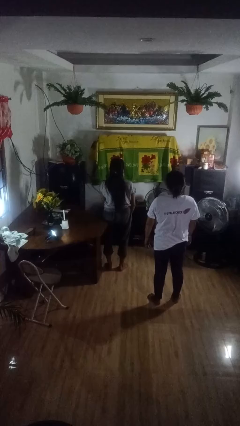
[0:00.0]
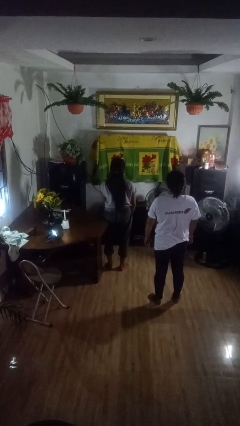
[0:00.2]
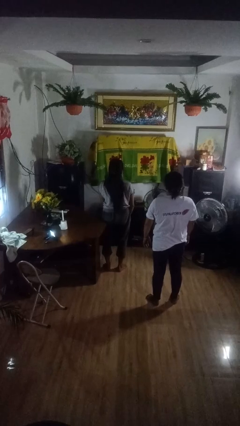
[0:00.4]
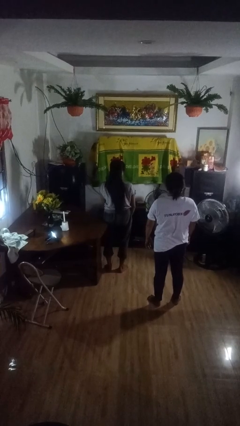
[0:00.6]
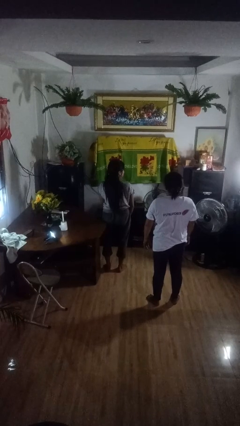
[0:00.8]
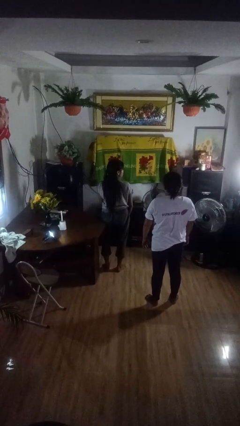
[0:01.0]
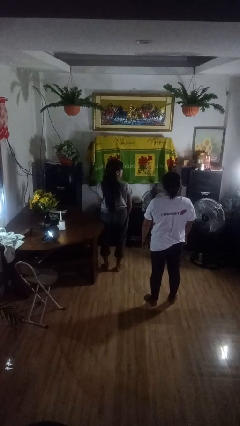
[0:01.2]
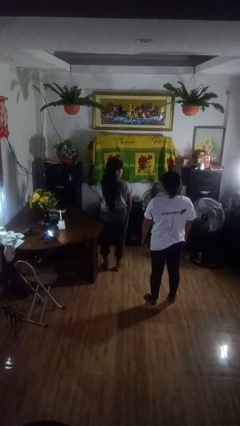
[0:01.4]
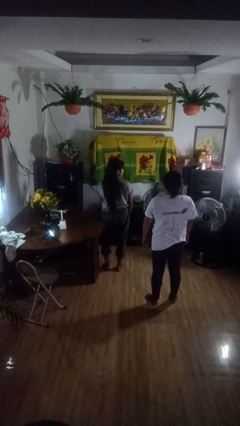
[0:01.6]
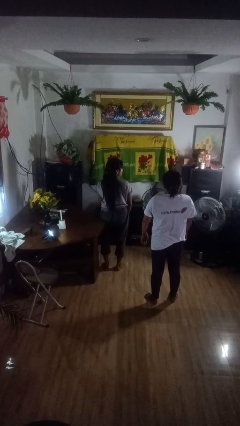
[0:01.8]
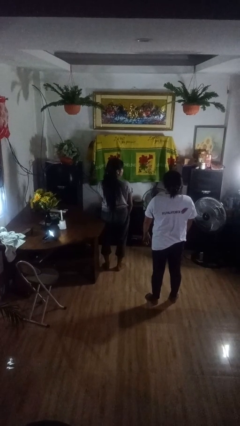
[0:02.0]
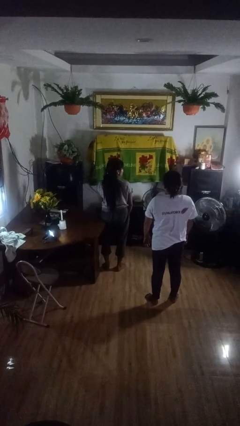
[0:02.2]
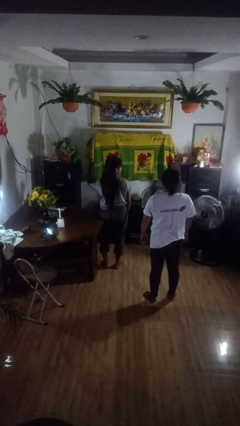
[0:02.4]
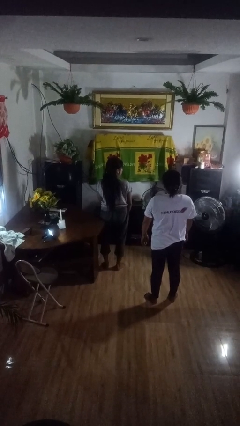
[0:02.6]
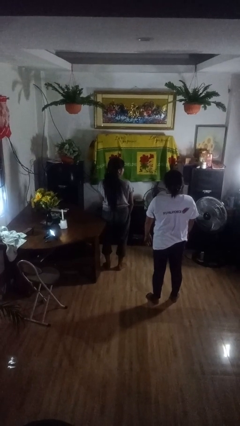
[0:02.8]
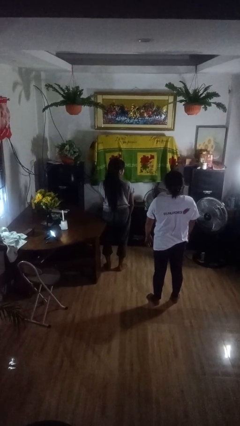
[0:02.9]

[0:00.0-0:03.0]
person looks over shoulder

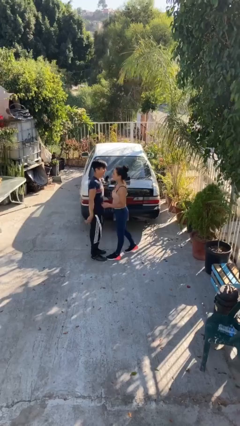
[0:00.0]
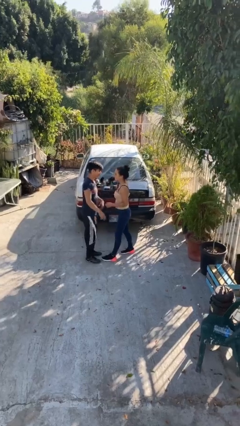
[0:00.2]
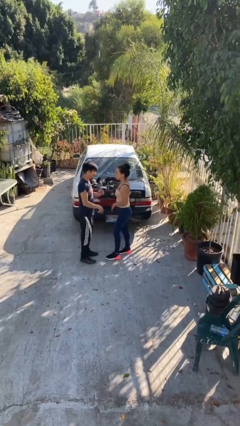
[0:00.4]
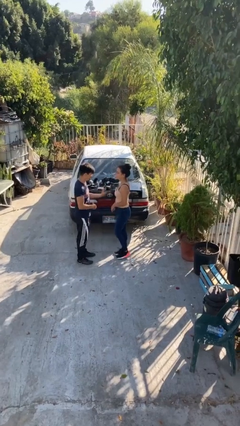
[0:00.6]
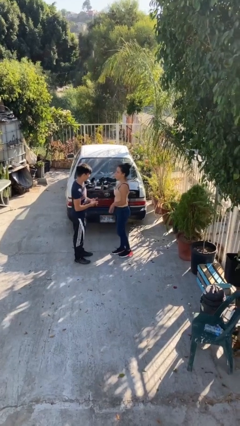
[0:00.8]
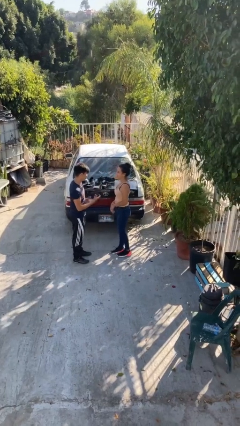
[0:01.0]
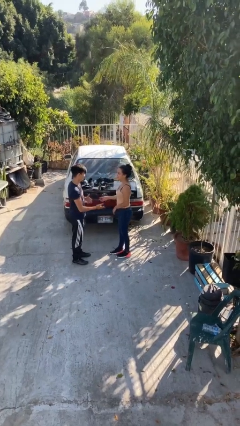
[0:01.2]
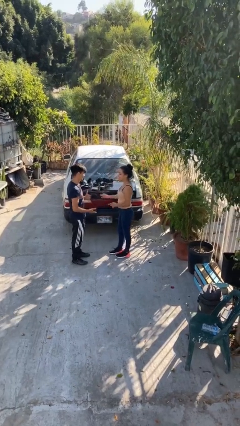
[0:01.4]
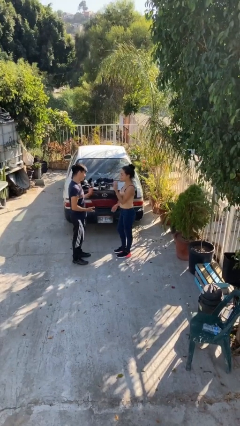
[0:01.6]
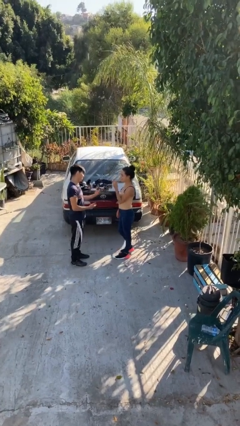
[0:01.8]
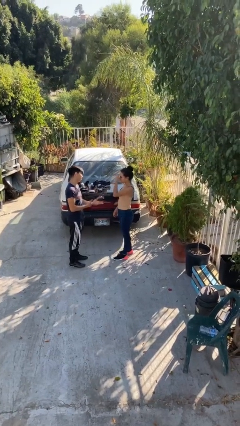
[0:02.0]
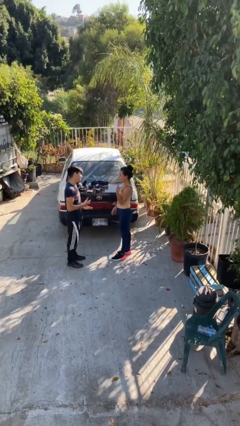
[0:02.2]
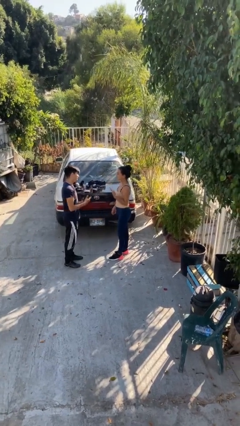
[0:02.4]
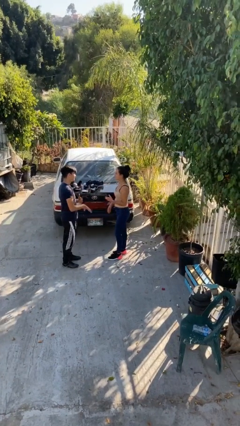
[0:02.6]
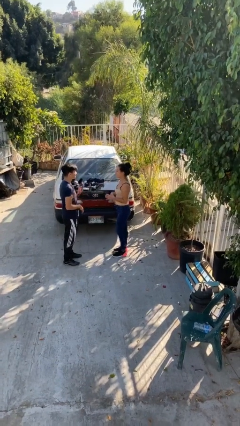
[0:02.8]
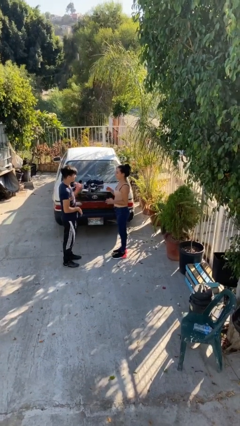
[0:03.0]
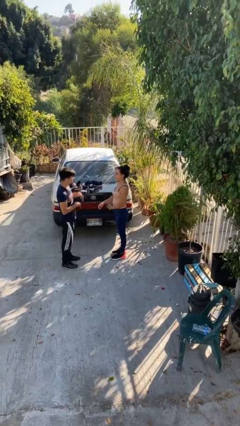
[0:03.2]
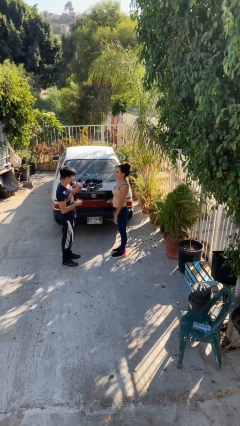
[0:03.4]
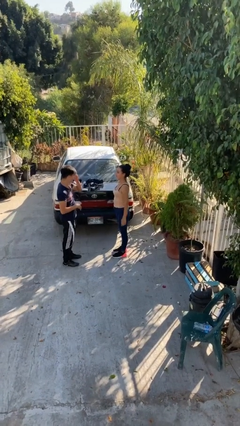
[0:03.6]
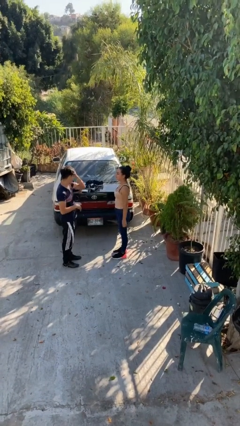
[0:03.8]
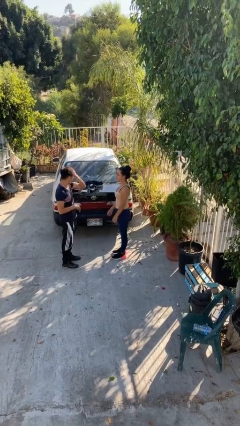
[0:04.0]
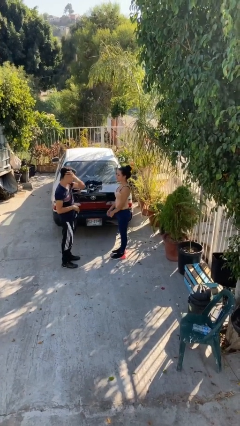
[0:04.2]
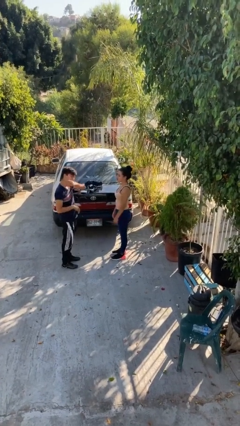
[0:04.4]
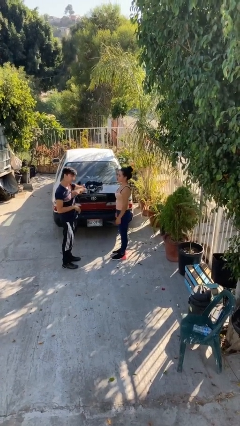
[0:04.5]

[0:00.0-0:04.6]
person talks to person

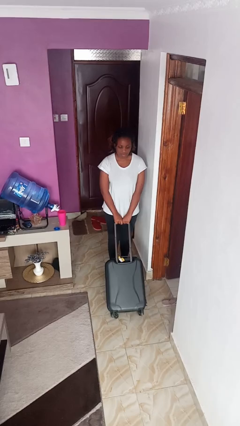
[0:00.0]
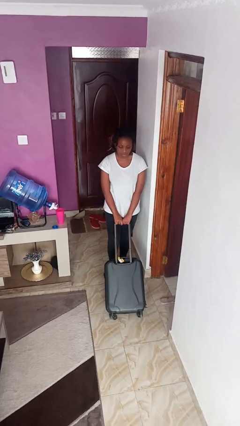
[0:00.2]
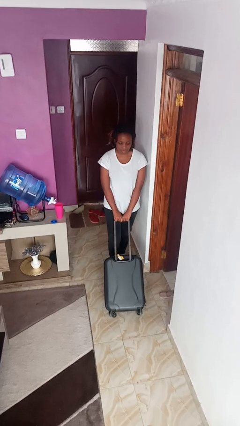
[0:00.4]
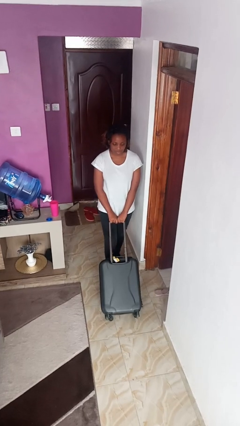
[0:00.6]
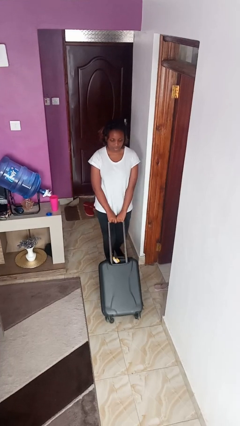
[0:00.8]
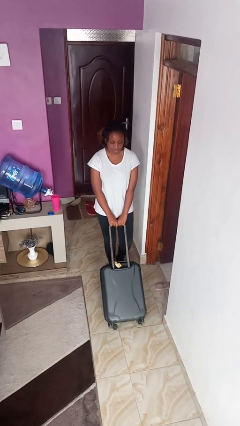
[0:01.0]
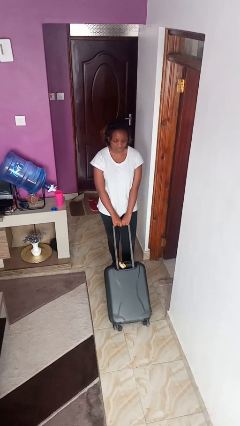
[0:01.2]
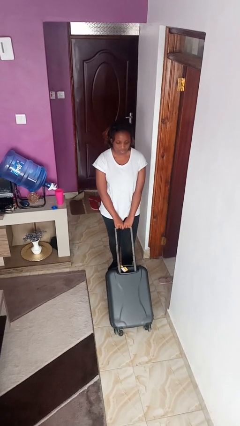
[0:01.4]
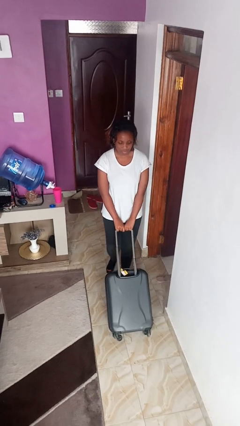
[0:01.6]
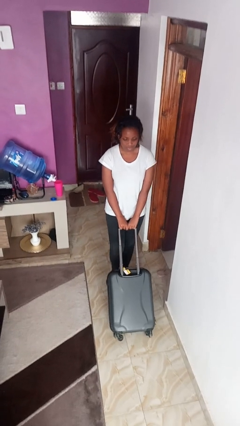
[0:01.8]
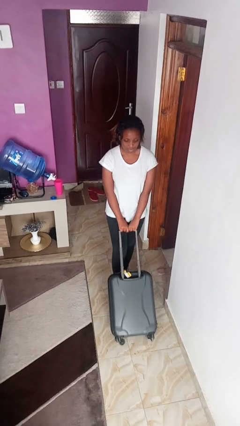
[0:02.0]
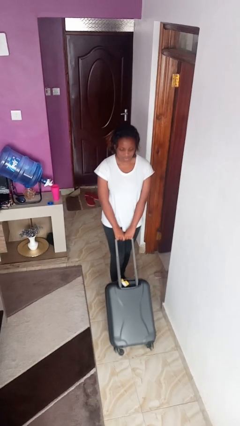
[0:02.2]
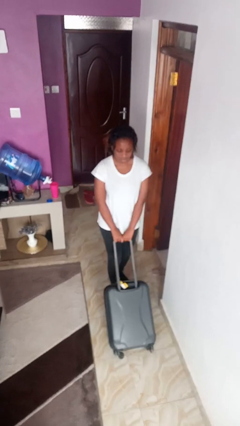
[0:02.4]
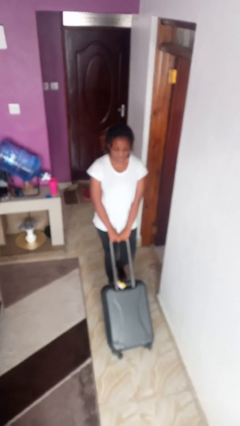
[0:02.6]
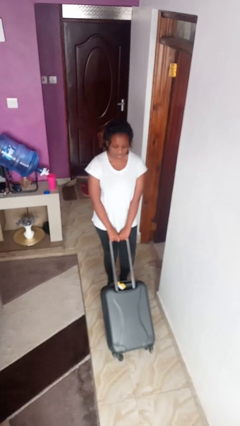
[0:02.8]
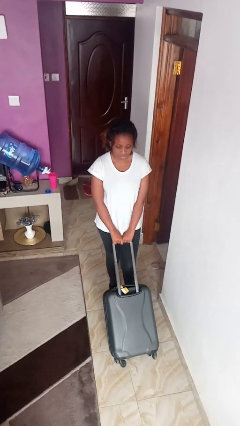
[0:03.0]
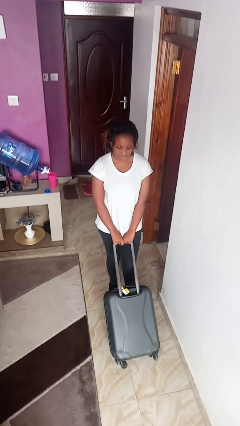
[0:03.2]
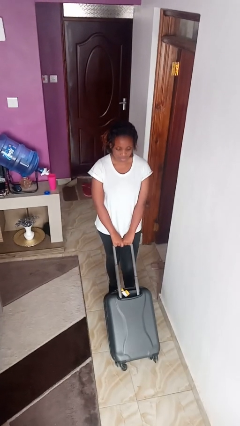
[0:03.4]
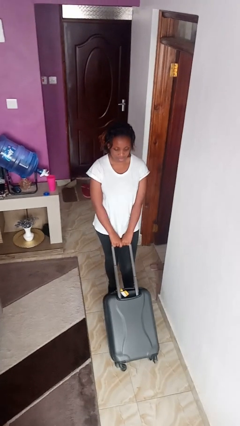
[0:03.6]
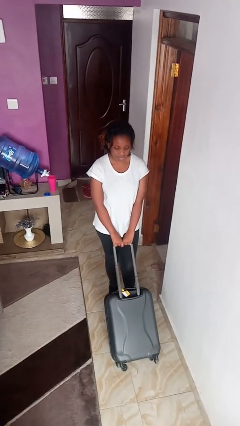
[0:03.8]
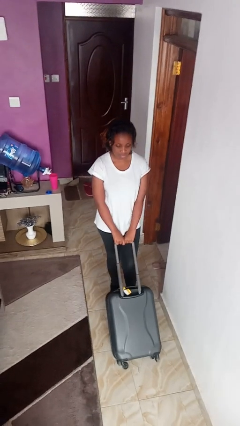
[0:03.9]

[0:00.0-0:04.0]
person pushes wheeled cart

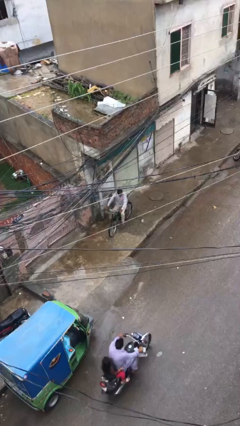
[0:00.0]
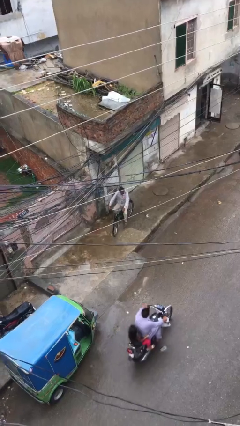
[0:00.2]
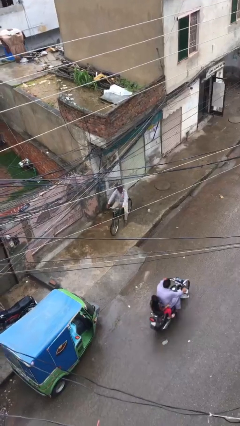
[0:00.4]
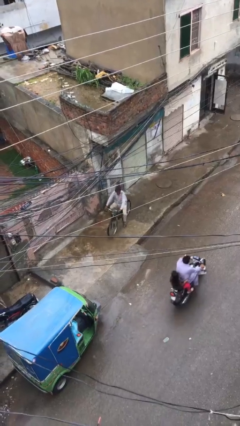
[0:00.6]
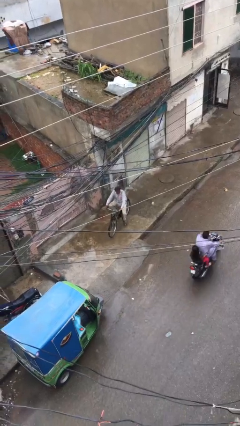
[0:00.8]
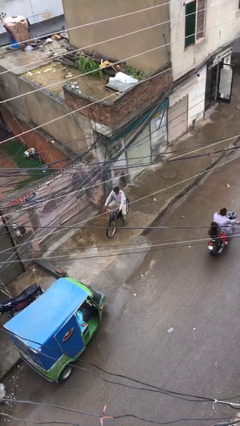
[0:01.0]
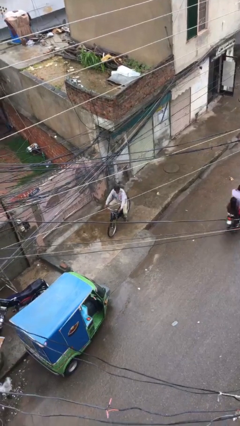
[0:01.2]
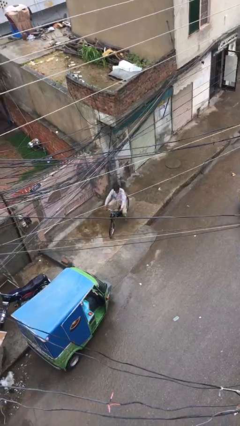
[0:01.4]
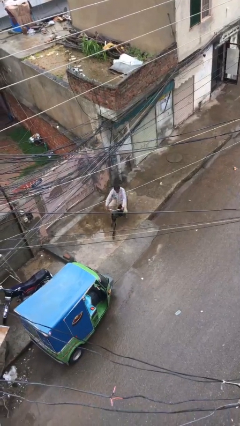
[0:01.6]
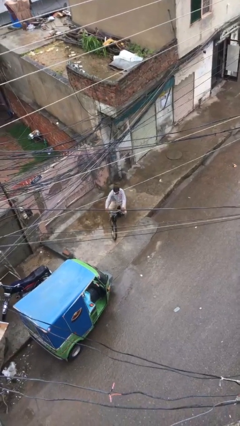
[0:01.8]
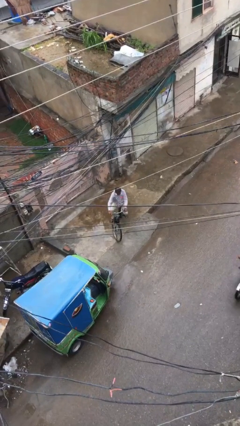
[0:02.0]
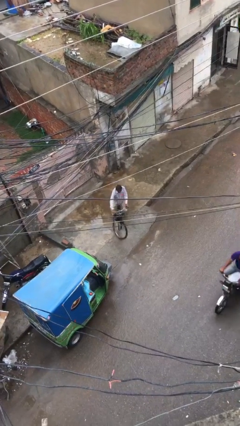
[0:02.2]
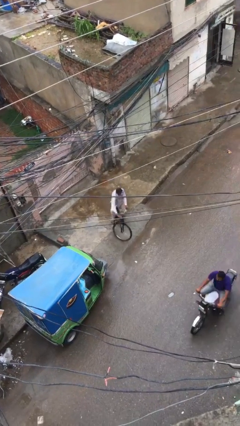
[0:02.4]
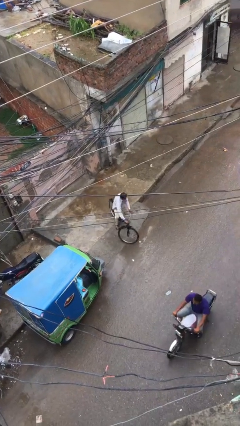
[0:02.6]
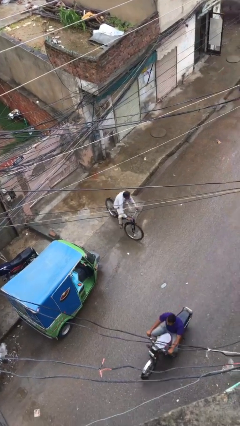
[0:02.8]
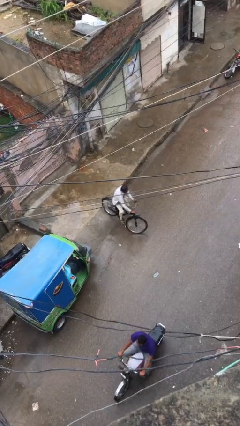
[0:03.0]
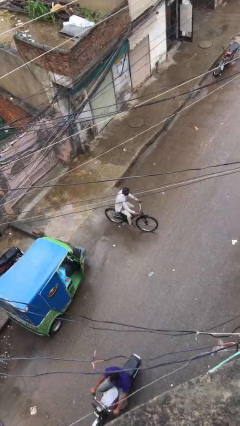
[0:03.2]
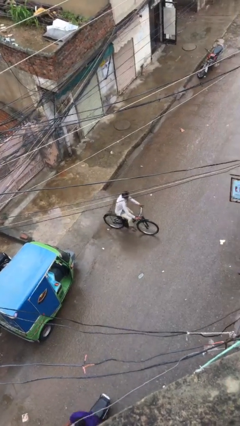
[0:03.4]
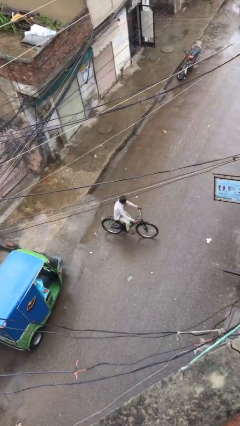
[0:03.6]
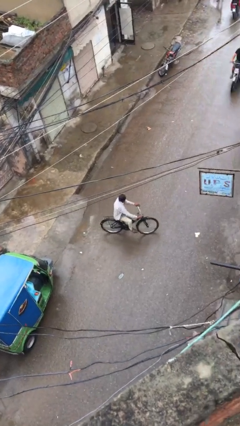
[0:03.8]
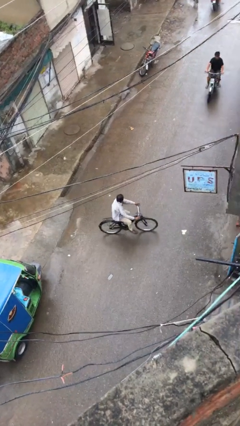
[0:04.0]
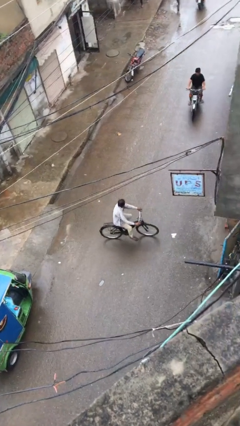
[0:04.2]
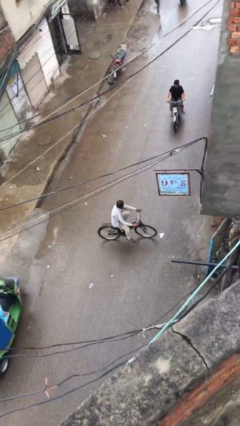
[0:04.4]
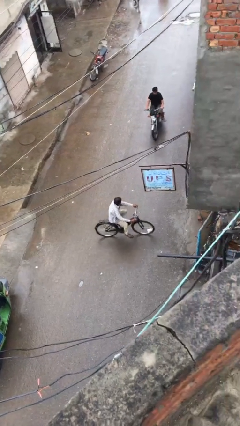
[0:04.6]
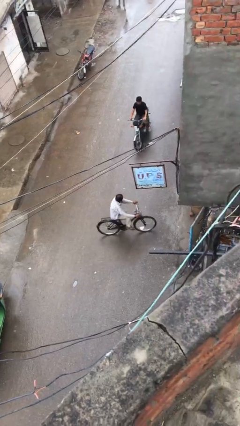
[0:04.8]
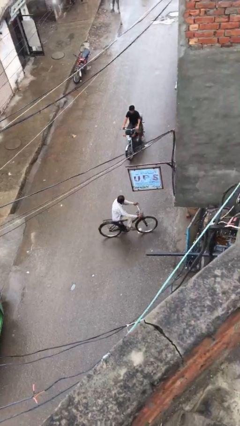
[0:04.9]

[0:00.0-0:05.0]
person rides bicycle

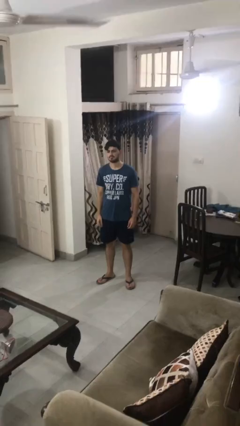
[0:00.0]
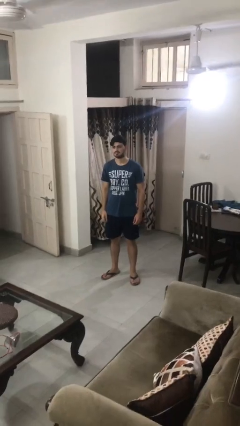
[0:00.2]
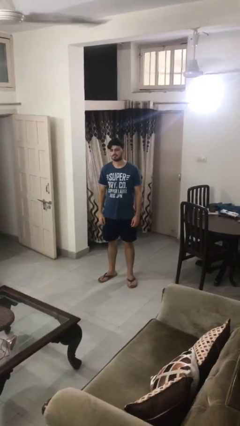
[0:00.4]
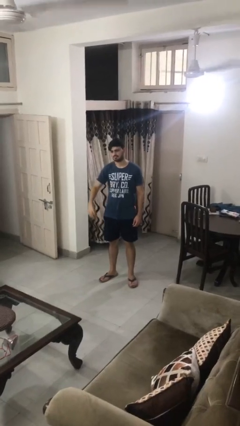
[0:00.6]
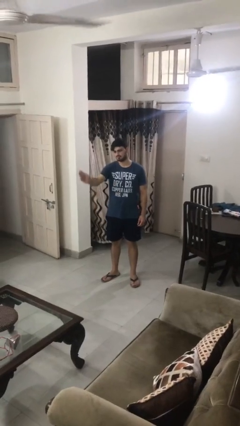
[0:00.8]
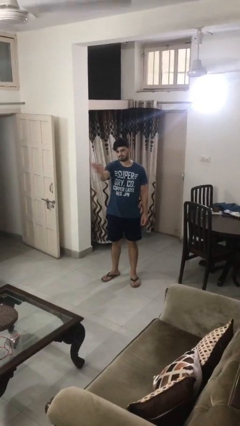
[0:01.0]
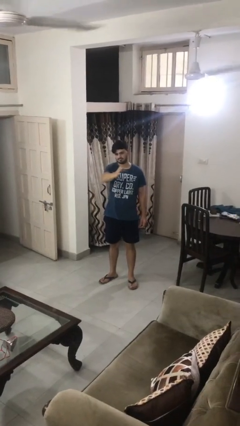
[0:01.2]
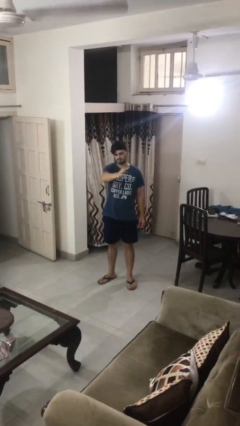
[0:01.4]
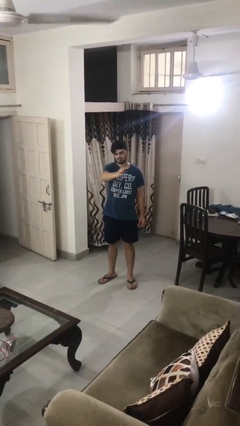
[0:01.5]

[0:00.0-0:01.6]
person gestures swipe left
